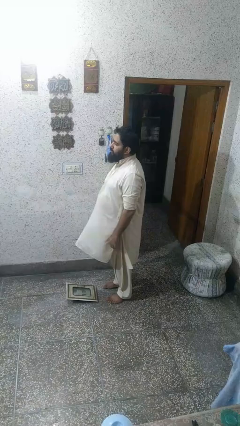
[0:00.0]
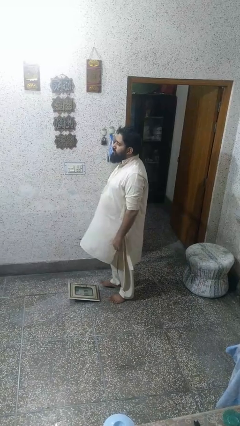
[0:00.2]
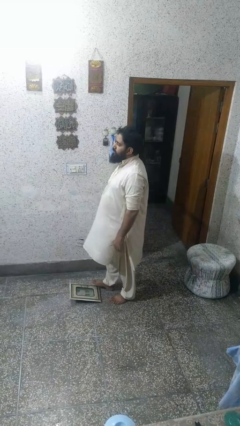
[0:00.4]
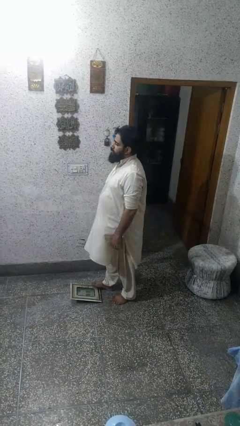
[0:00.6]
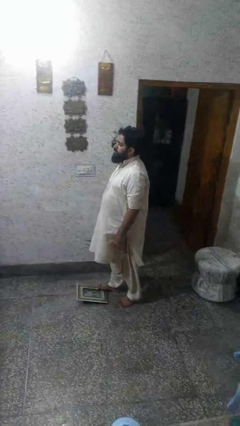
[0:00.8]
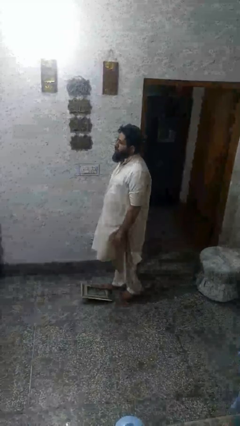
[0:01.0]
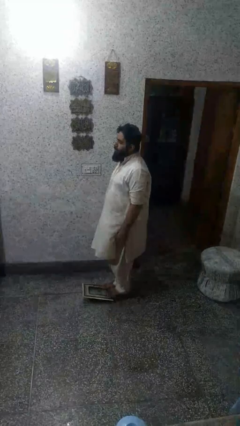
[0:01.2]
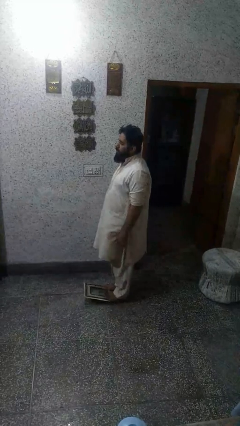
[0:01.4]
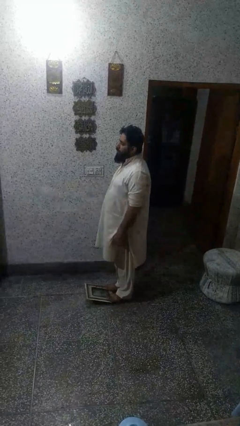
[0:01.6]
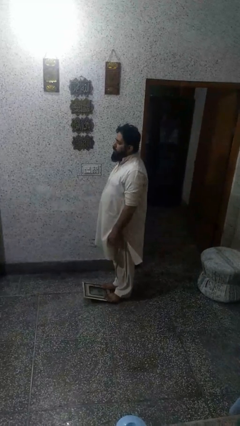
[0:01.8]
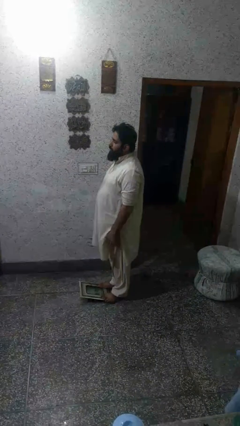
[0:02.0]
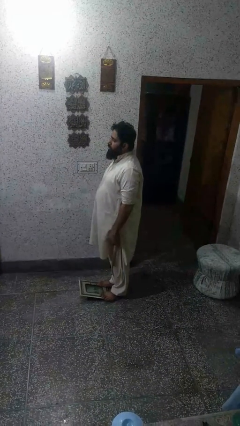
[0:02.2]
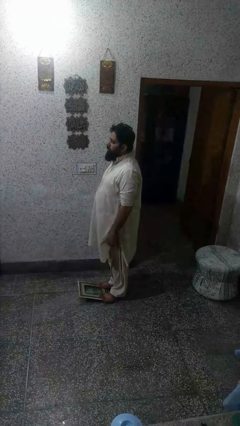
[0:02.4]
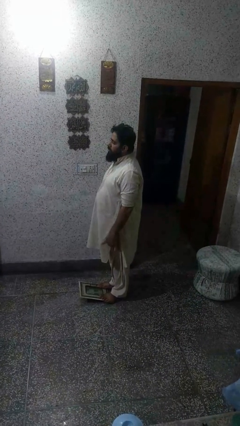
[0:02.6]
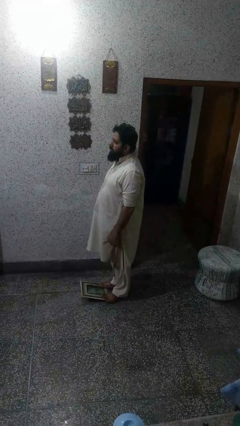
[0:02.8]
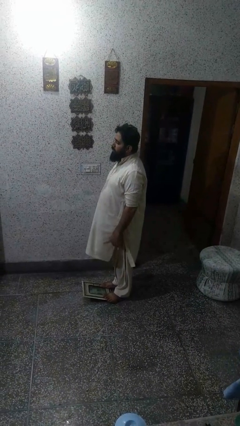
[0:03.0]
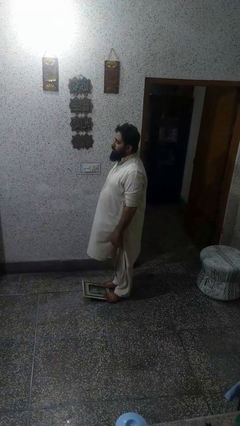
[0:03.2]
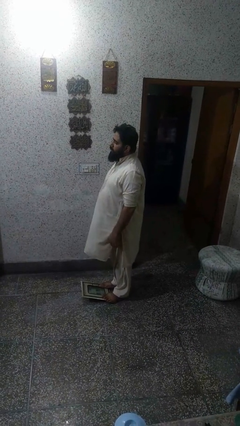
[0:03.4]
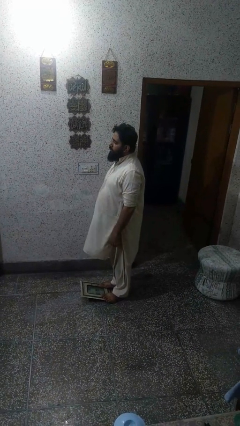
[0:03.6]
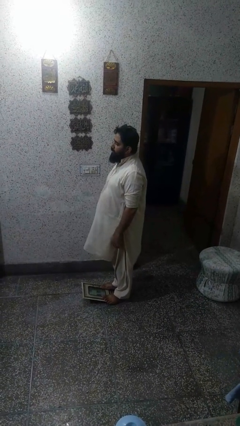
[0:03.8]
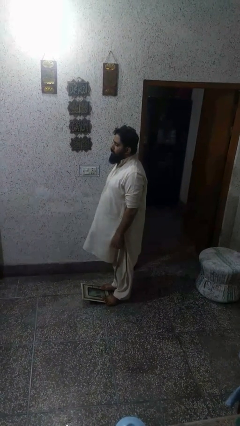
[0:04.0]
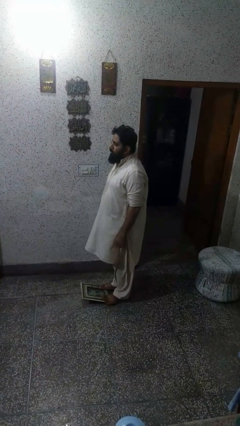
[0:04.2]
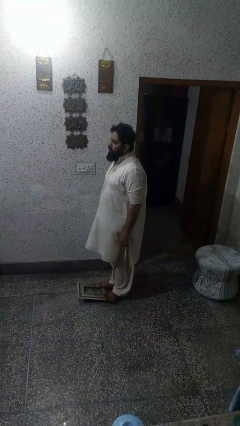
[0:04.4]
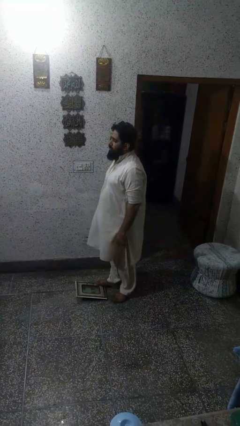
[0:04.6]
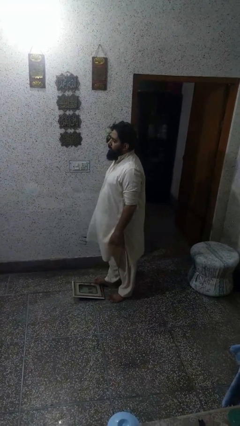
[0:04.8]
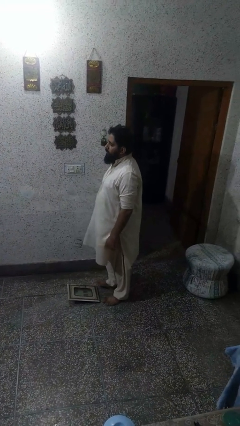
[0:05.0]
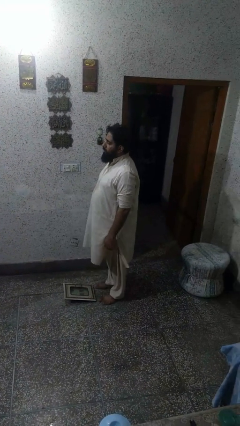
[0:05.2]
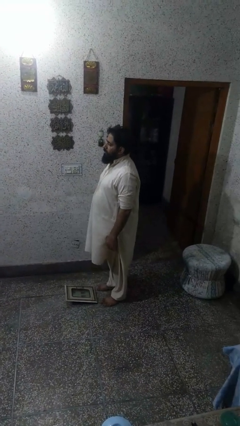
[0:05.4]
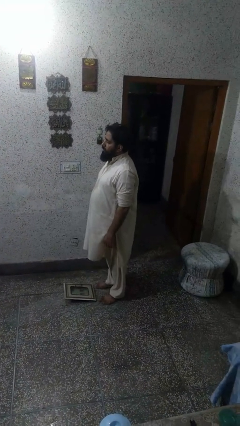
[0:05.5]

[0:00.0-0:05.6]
person uses bodyweight scale

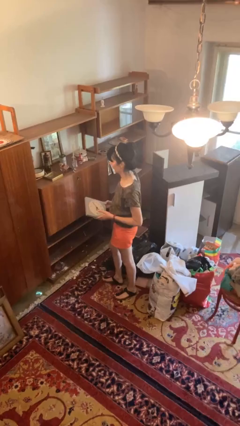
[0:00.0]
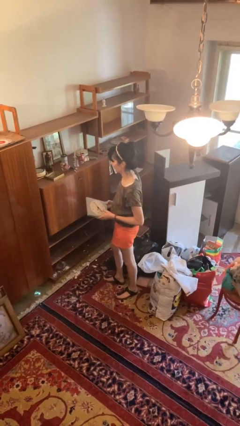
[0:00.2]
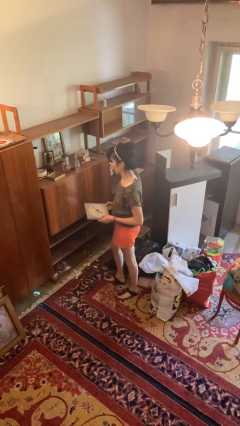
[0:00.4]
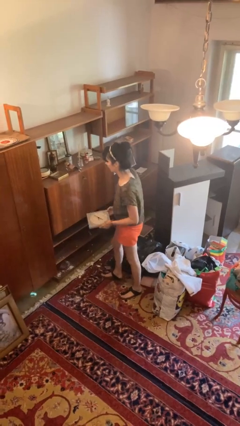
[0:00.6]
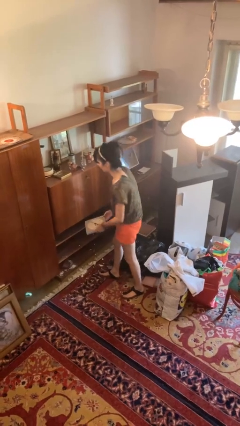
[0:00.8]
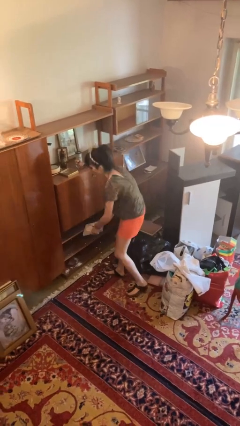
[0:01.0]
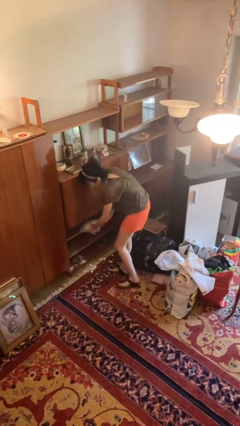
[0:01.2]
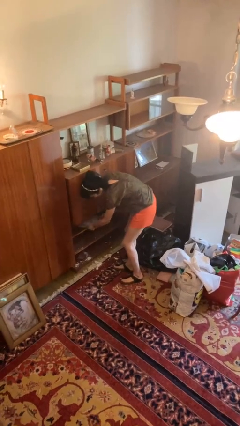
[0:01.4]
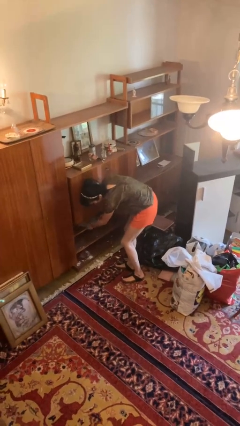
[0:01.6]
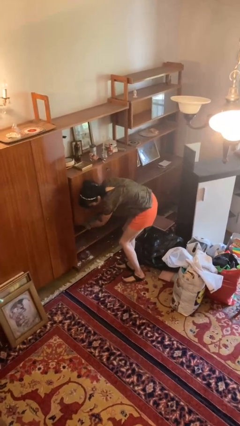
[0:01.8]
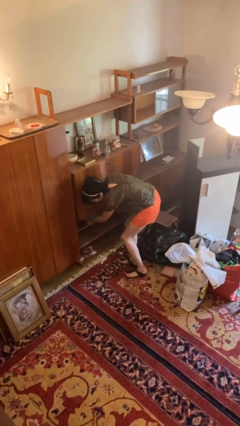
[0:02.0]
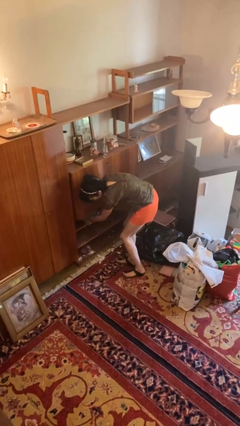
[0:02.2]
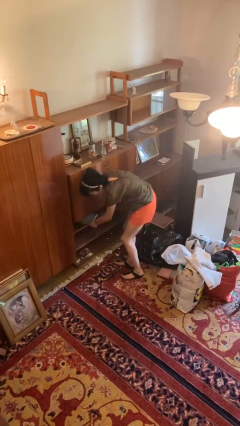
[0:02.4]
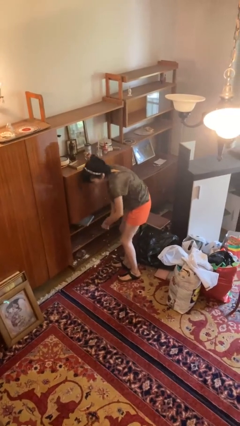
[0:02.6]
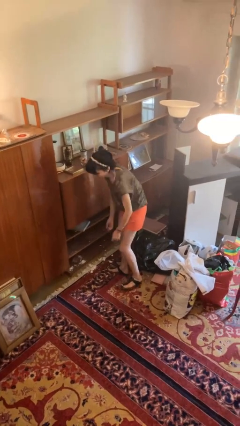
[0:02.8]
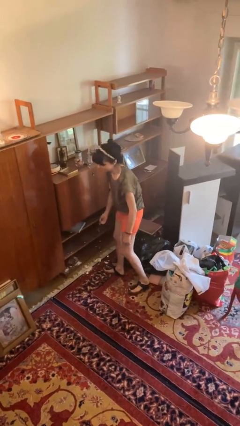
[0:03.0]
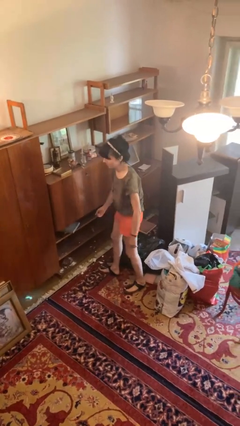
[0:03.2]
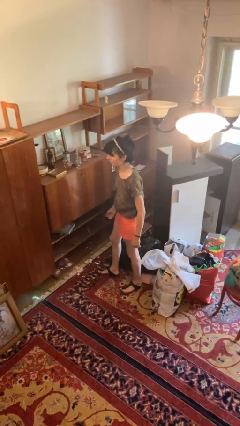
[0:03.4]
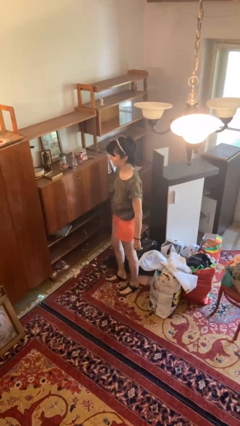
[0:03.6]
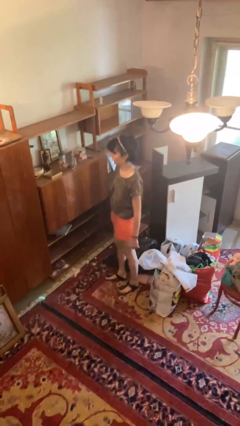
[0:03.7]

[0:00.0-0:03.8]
person puts down object into cabinet

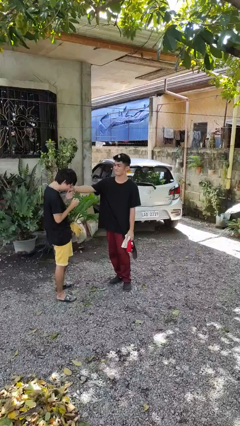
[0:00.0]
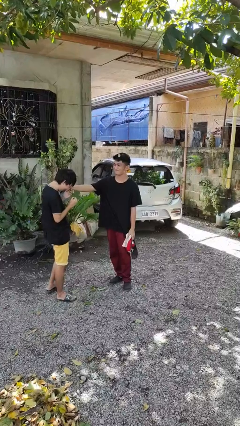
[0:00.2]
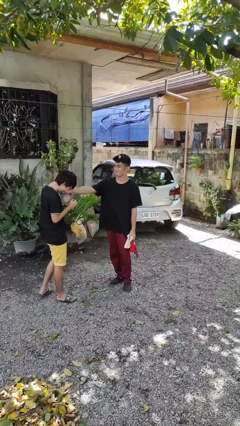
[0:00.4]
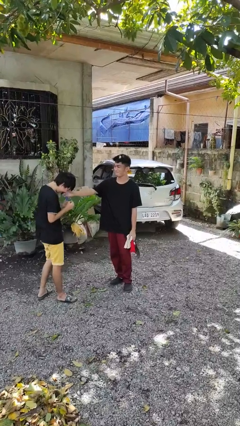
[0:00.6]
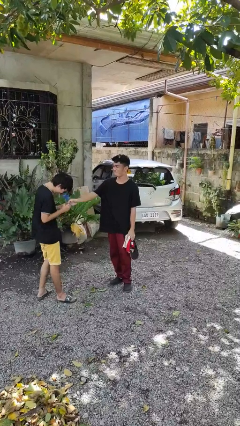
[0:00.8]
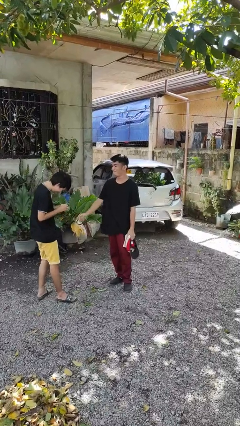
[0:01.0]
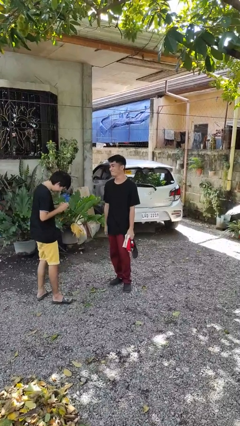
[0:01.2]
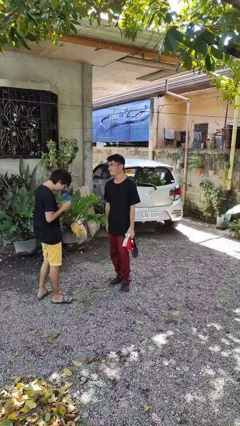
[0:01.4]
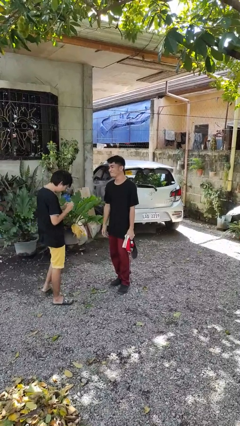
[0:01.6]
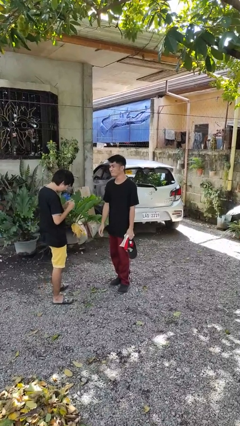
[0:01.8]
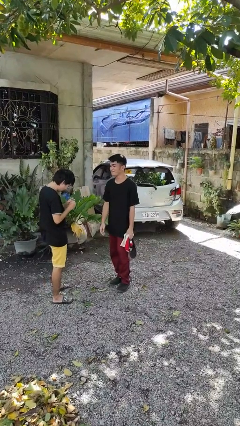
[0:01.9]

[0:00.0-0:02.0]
person touches face of person

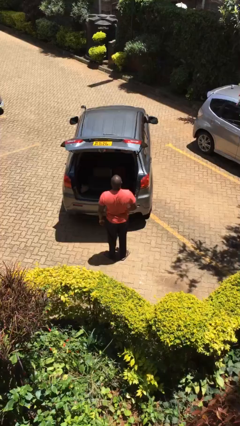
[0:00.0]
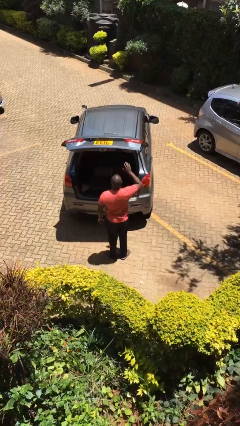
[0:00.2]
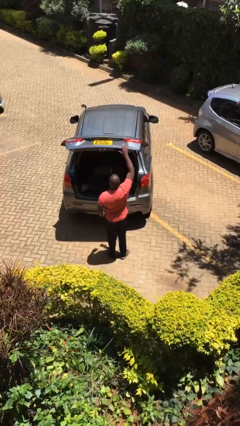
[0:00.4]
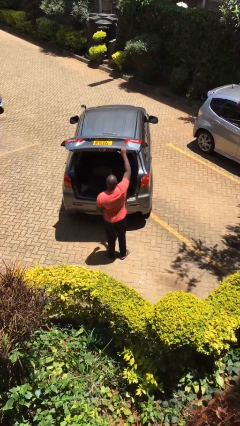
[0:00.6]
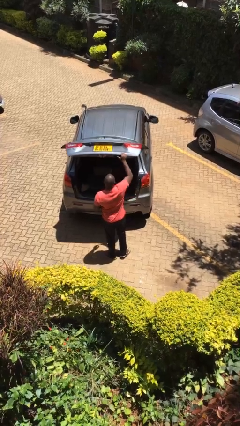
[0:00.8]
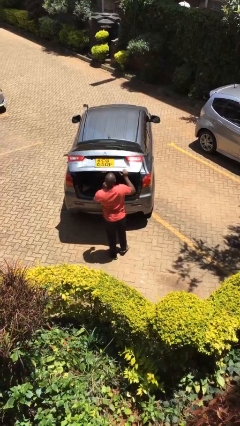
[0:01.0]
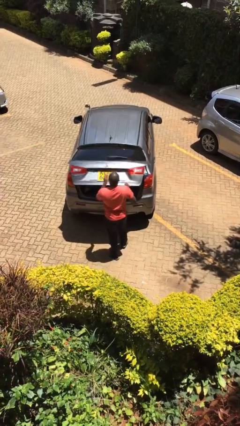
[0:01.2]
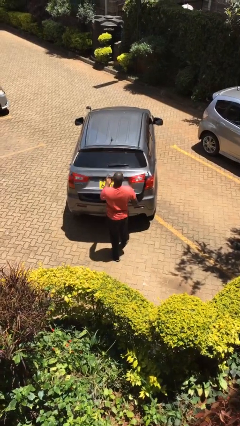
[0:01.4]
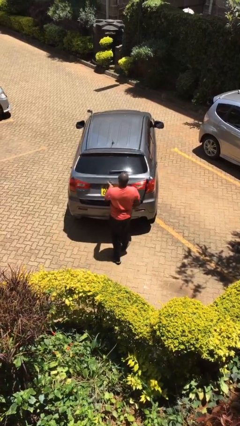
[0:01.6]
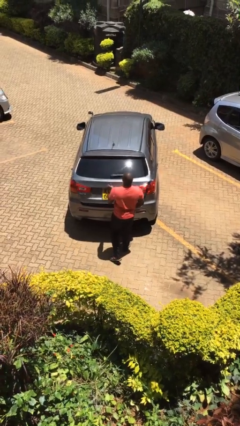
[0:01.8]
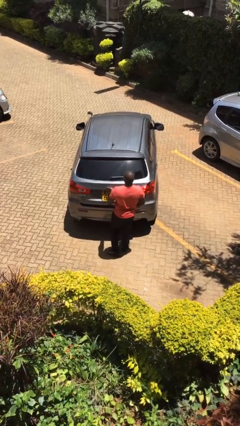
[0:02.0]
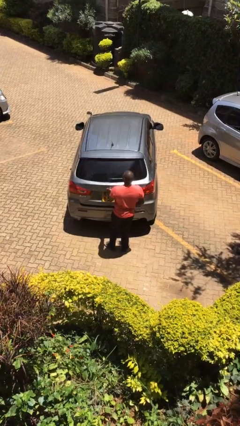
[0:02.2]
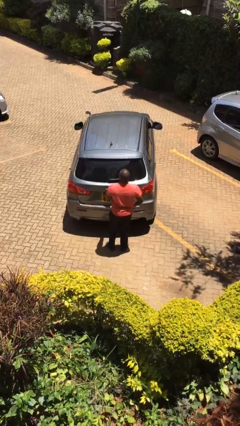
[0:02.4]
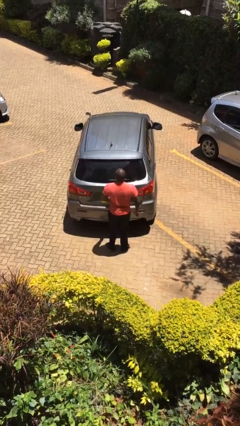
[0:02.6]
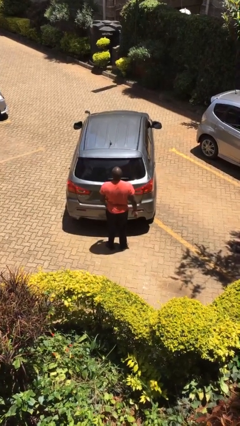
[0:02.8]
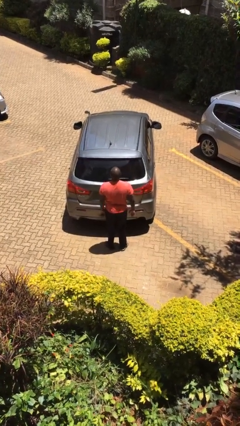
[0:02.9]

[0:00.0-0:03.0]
person closes car trunk

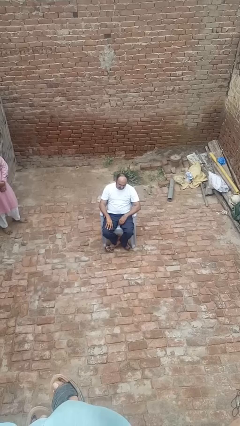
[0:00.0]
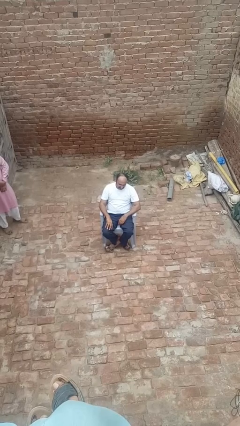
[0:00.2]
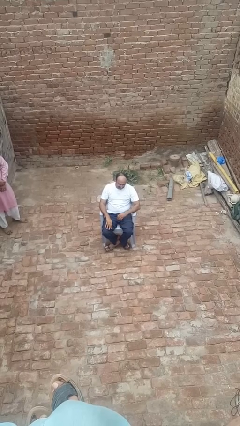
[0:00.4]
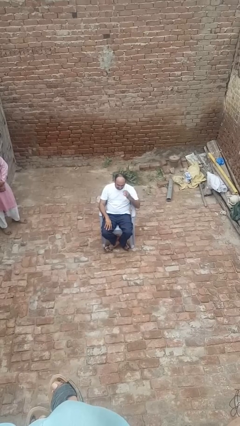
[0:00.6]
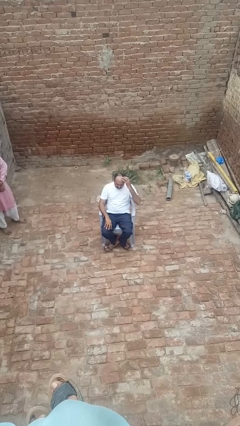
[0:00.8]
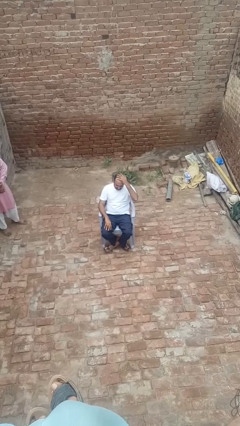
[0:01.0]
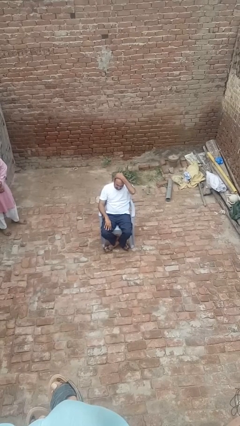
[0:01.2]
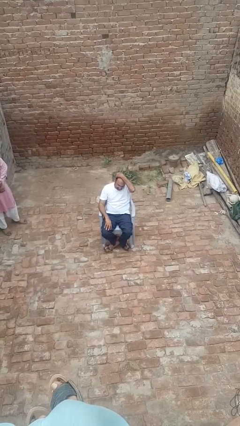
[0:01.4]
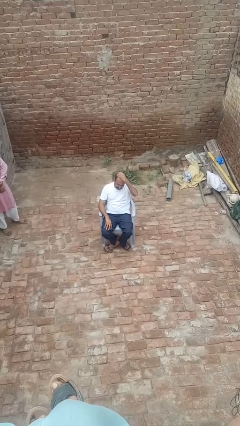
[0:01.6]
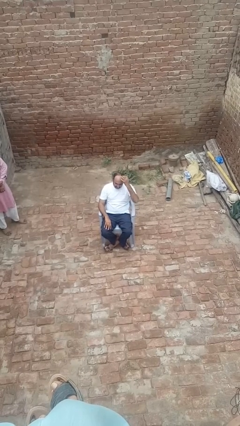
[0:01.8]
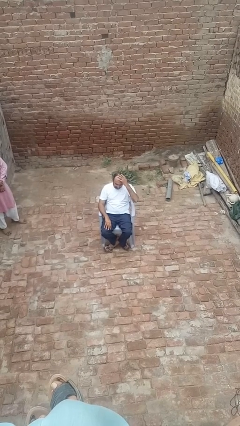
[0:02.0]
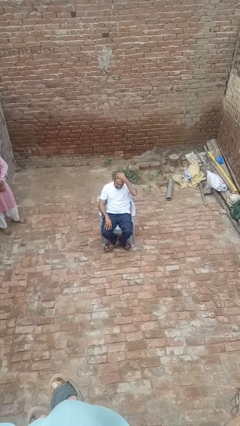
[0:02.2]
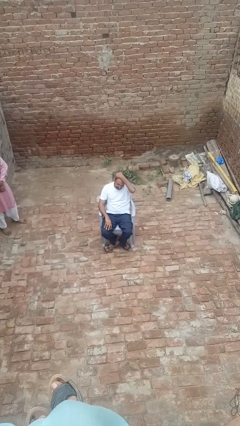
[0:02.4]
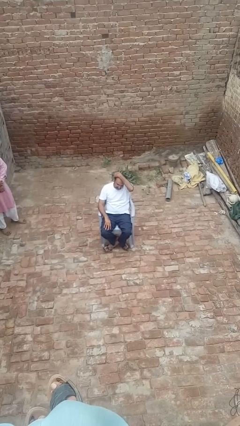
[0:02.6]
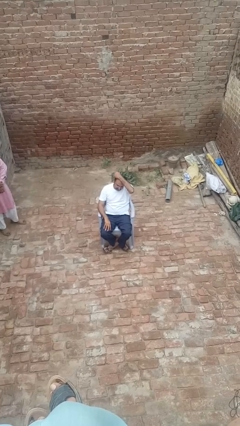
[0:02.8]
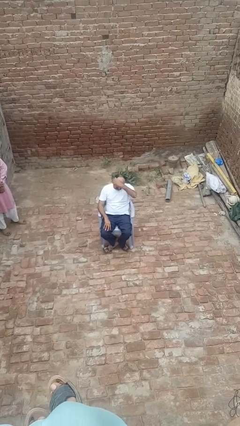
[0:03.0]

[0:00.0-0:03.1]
person strokes hair
